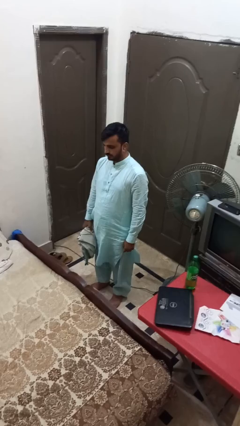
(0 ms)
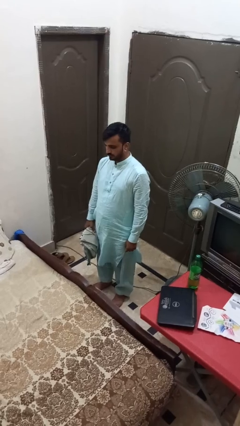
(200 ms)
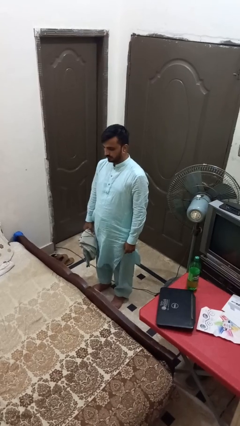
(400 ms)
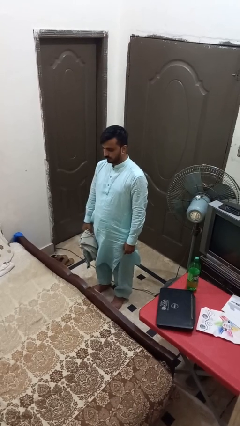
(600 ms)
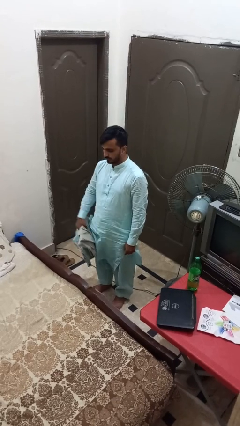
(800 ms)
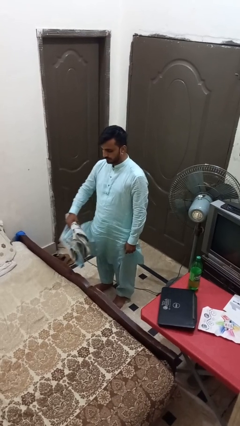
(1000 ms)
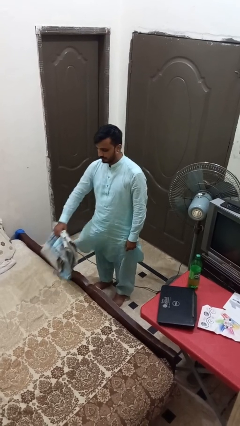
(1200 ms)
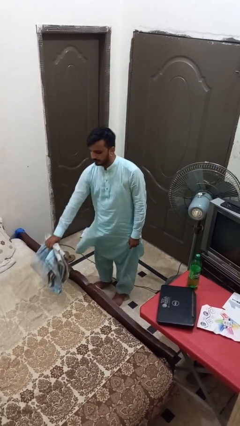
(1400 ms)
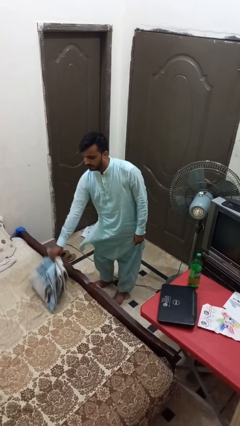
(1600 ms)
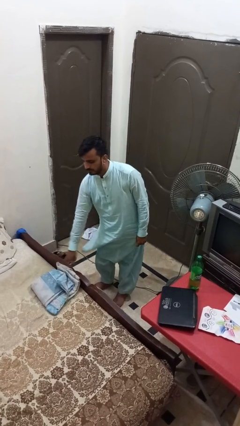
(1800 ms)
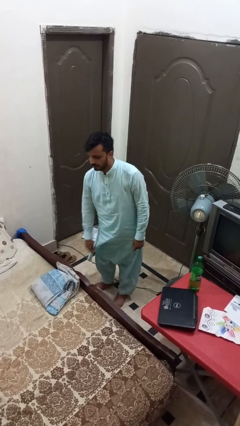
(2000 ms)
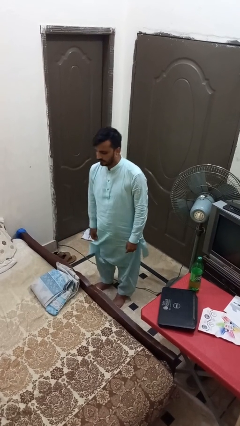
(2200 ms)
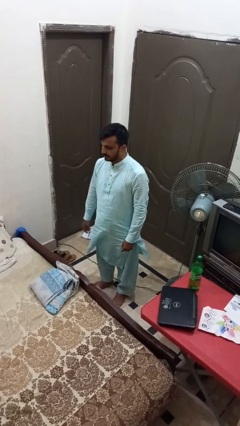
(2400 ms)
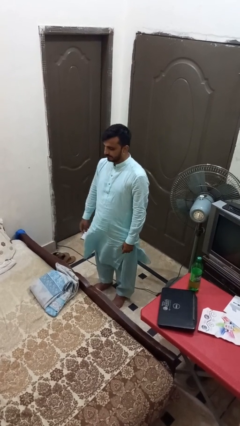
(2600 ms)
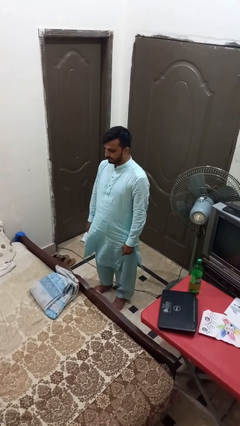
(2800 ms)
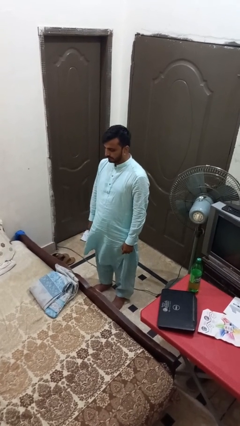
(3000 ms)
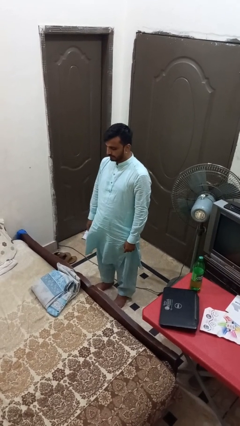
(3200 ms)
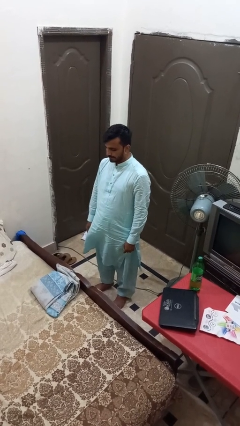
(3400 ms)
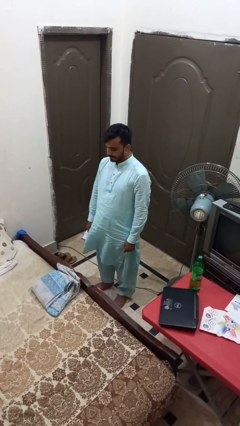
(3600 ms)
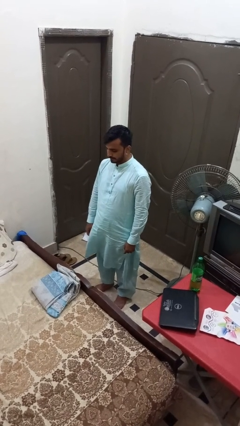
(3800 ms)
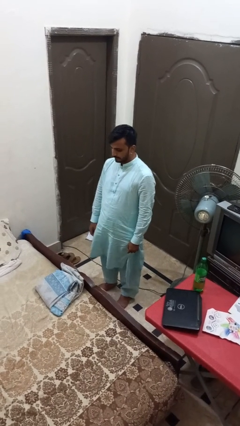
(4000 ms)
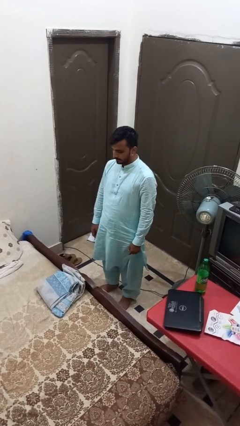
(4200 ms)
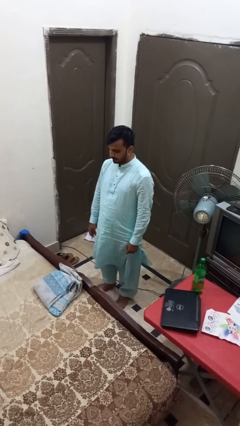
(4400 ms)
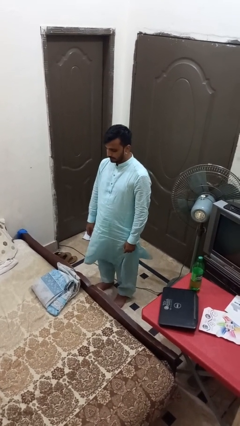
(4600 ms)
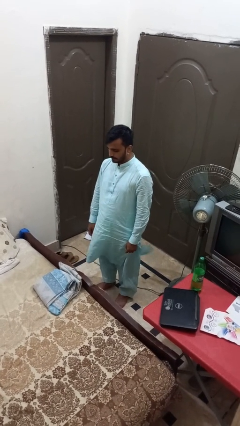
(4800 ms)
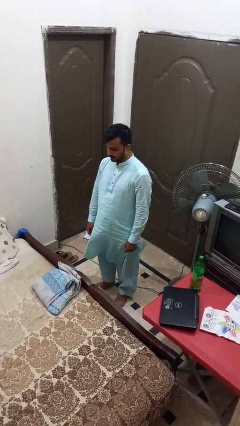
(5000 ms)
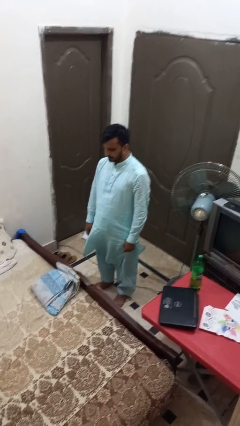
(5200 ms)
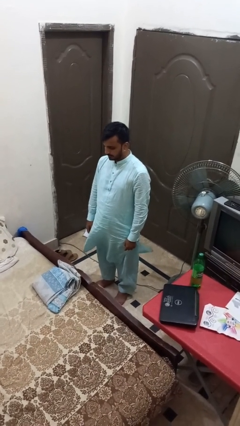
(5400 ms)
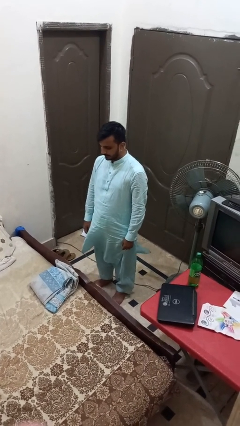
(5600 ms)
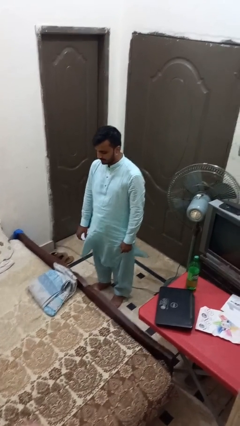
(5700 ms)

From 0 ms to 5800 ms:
person puts down object on bed

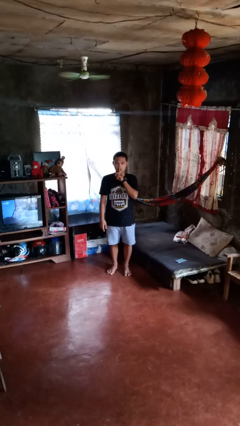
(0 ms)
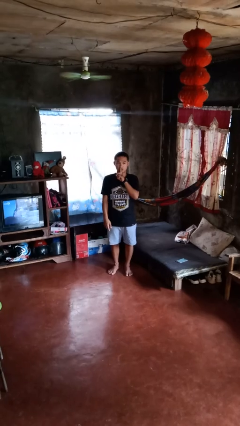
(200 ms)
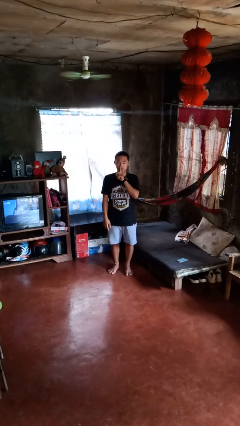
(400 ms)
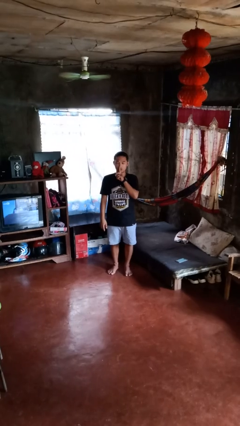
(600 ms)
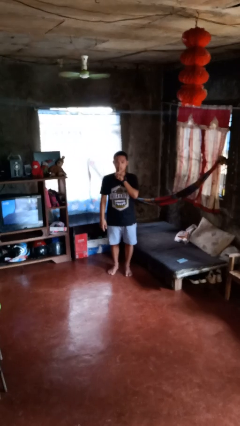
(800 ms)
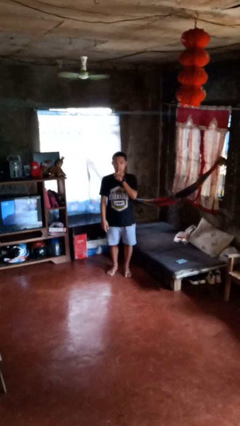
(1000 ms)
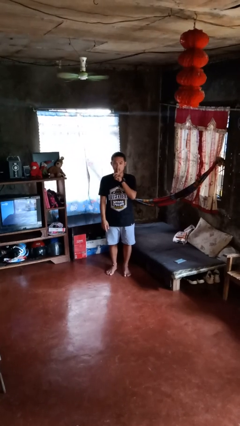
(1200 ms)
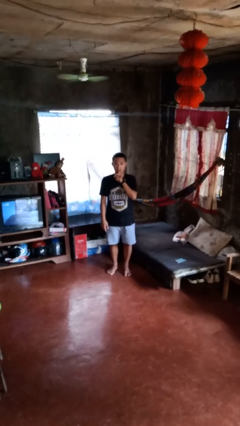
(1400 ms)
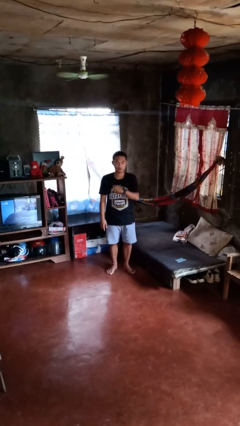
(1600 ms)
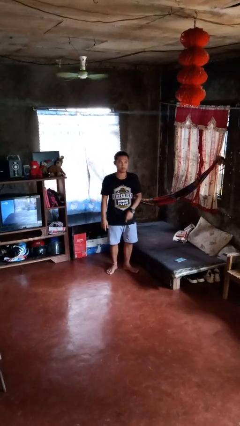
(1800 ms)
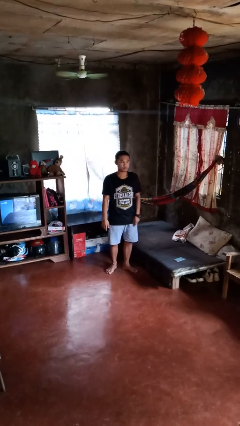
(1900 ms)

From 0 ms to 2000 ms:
person gestures be quiet

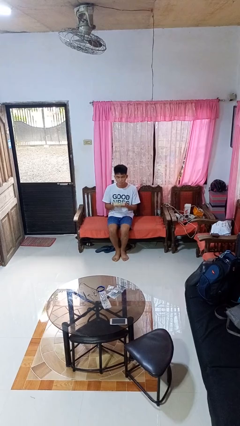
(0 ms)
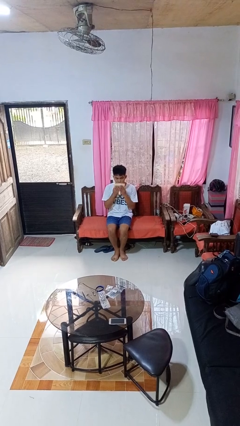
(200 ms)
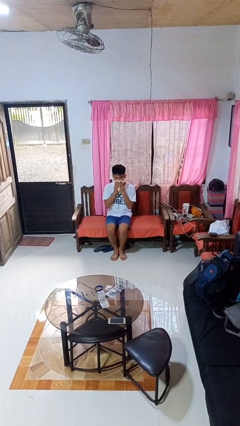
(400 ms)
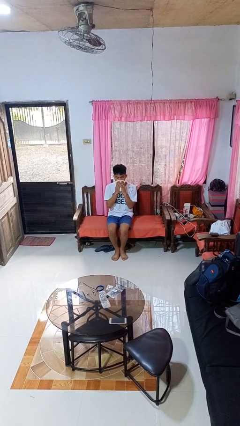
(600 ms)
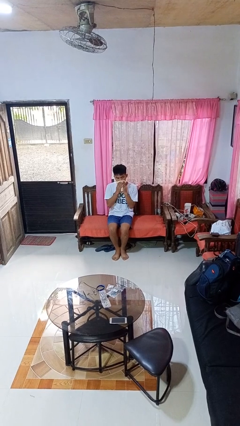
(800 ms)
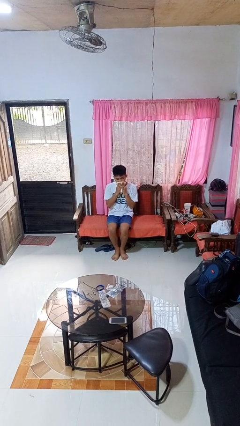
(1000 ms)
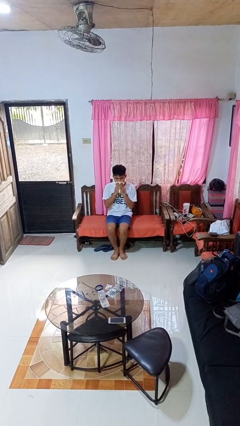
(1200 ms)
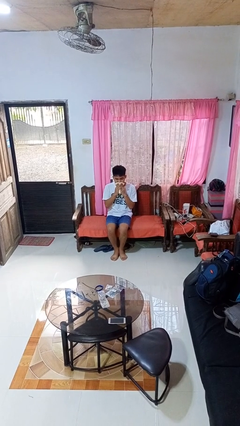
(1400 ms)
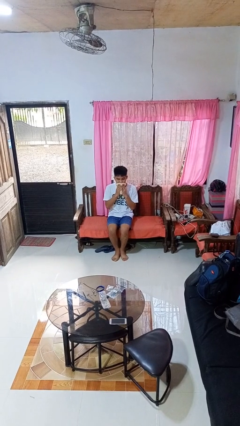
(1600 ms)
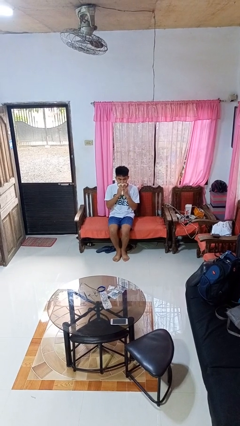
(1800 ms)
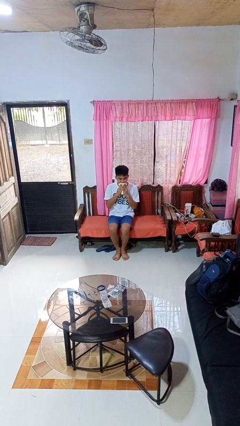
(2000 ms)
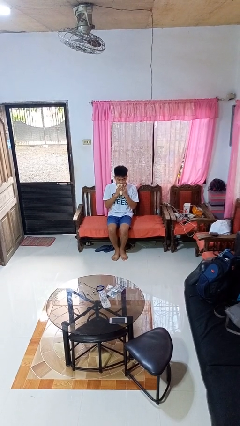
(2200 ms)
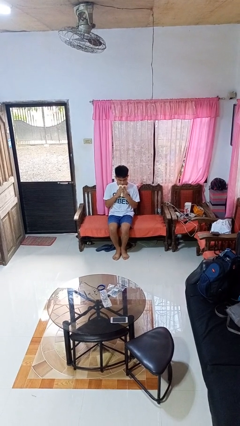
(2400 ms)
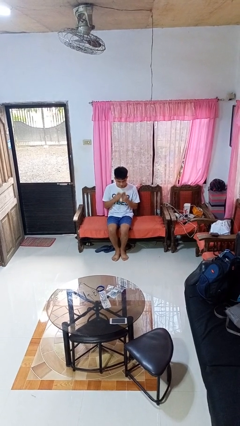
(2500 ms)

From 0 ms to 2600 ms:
person wipes mouth with napkin

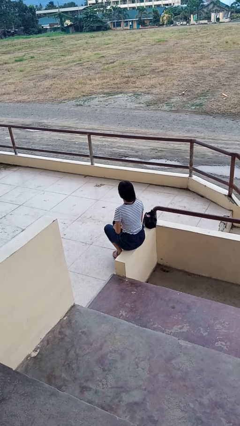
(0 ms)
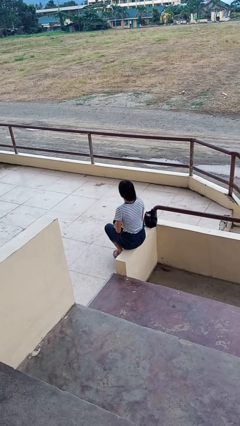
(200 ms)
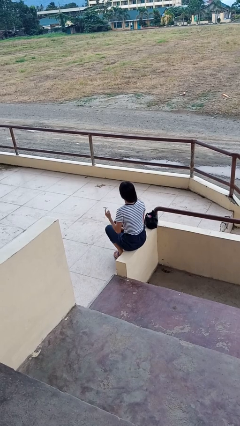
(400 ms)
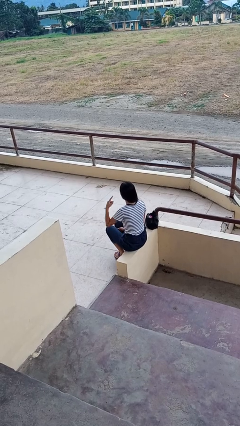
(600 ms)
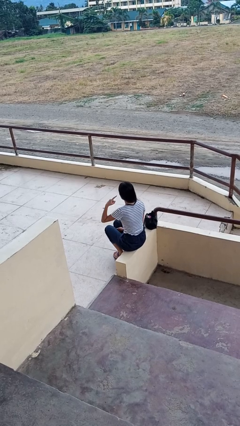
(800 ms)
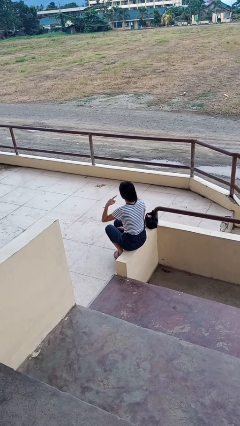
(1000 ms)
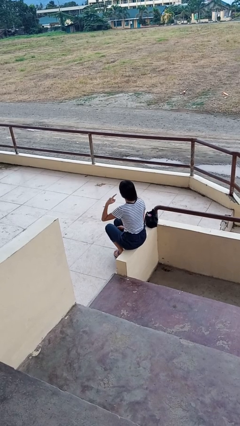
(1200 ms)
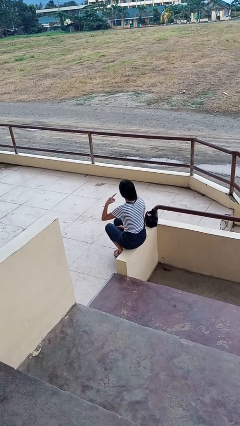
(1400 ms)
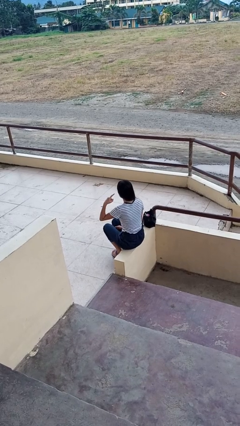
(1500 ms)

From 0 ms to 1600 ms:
person gestures listen closely

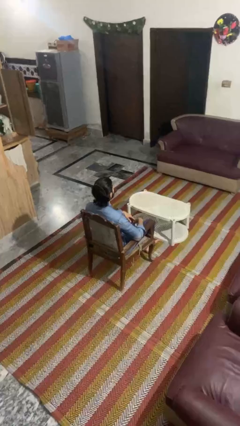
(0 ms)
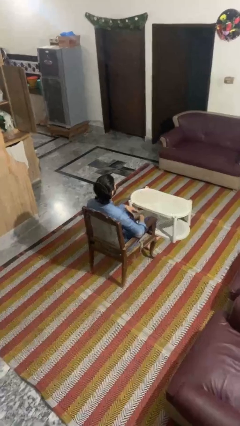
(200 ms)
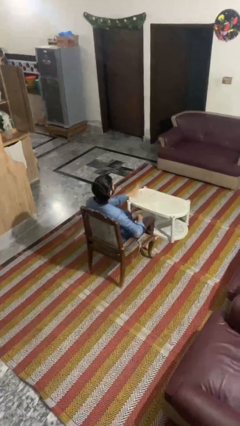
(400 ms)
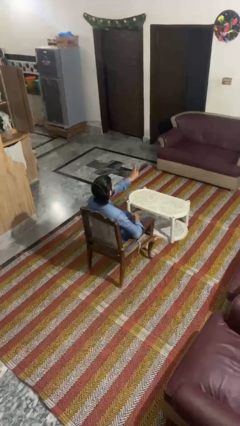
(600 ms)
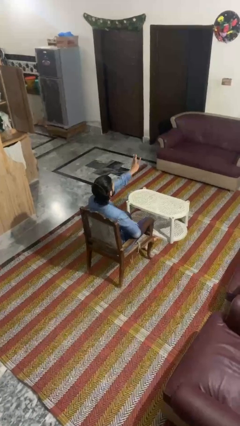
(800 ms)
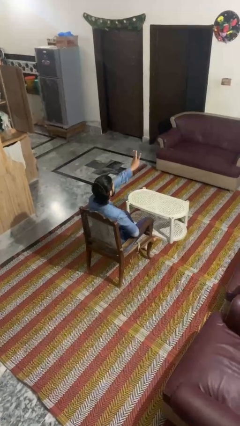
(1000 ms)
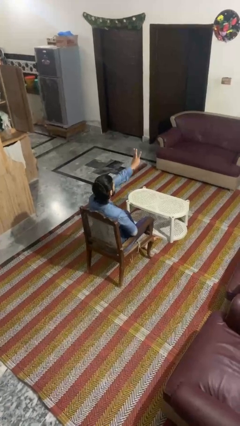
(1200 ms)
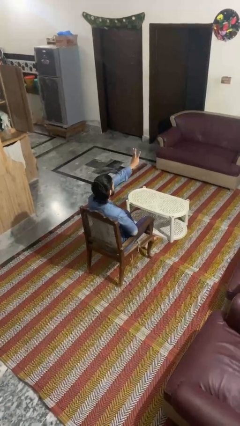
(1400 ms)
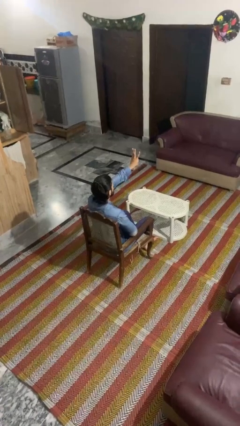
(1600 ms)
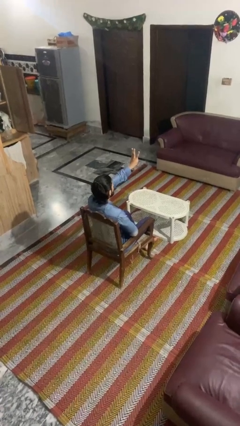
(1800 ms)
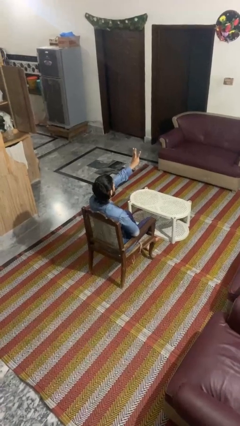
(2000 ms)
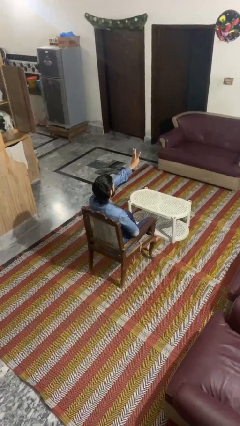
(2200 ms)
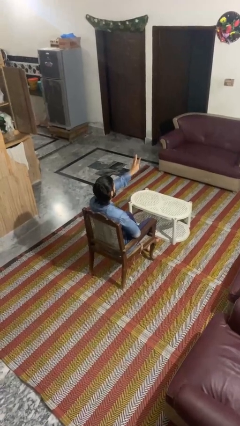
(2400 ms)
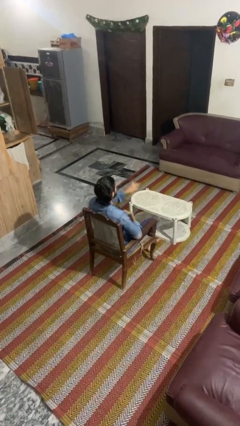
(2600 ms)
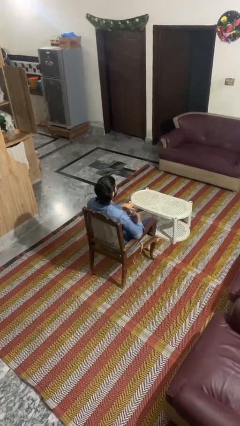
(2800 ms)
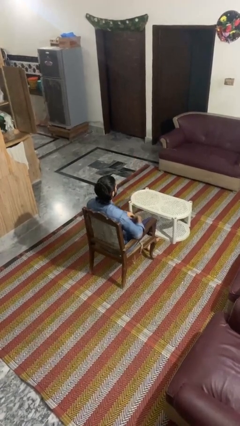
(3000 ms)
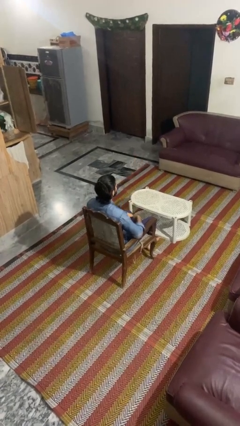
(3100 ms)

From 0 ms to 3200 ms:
person gestures number three

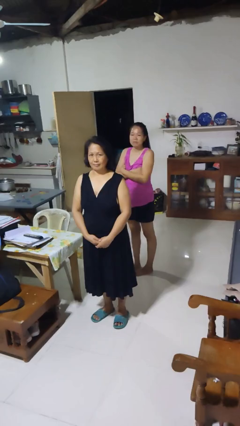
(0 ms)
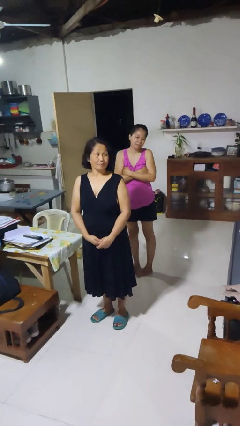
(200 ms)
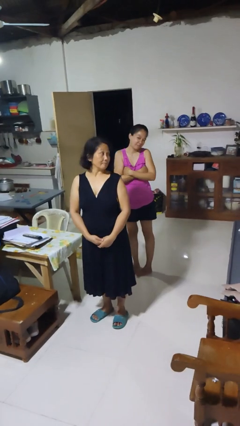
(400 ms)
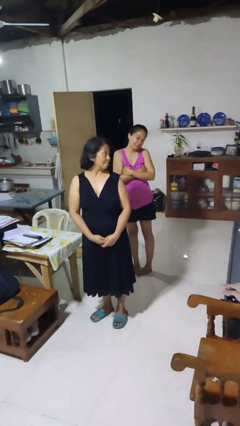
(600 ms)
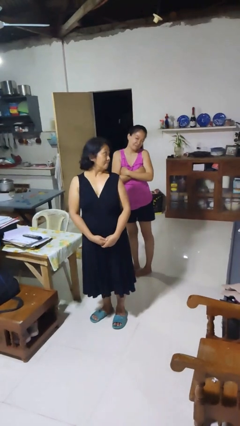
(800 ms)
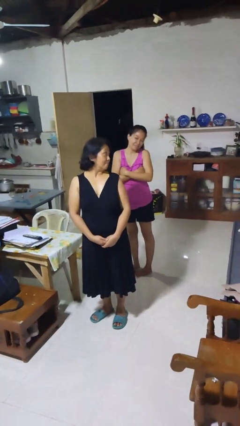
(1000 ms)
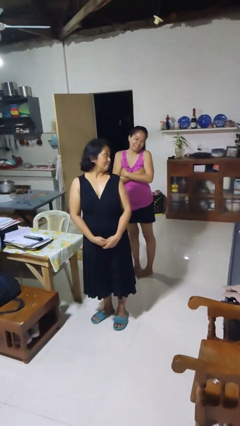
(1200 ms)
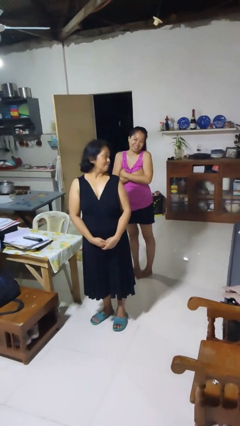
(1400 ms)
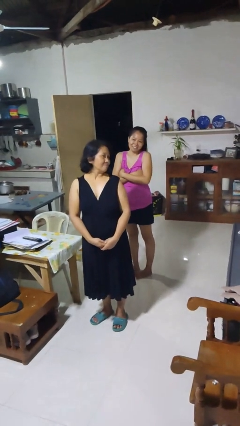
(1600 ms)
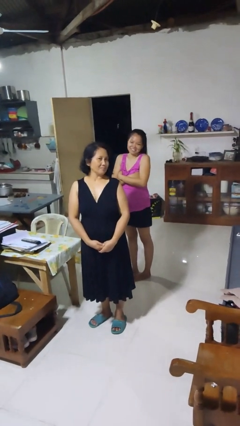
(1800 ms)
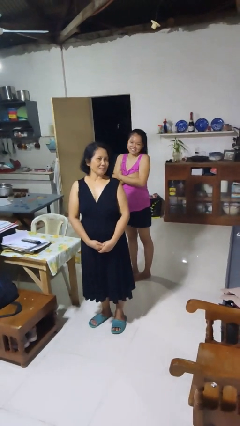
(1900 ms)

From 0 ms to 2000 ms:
person looks over shoulder

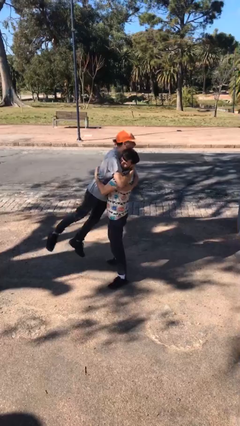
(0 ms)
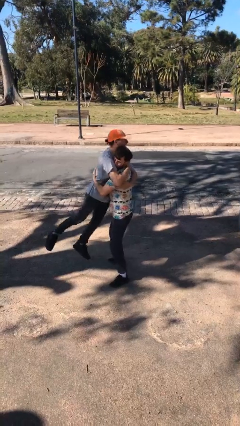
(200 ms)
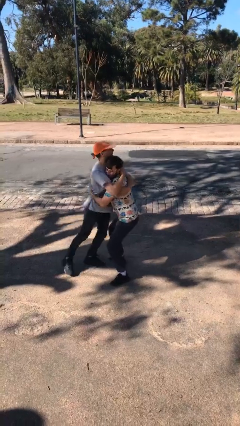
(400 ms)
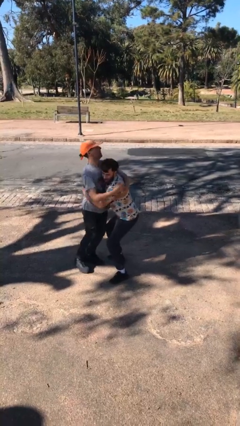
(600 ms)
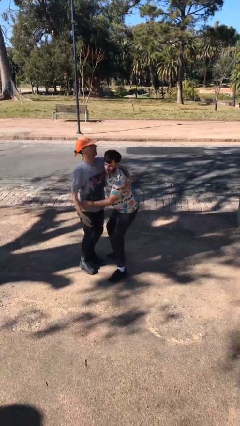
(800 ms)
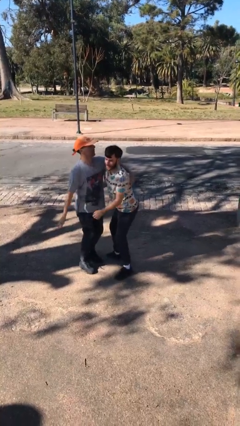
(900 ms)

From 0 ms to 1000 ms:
person puts down person
